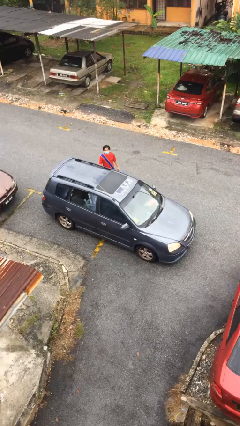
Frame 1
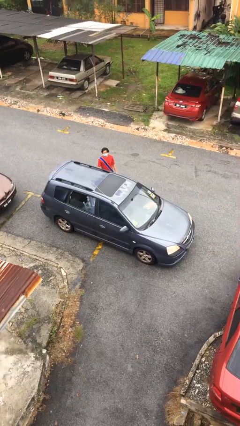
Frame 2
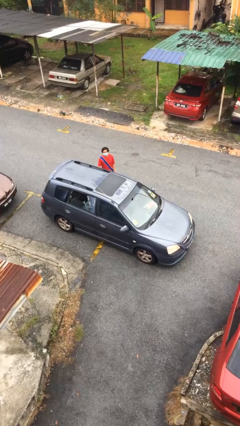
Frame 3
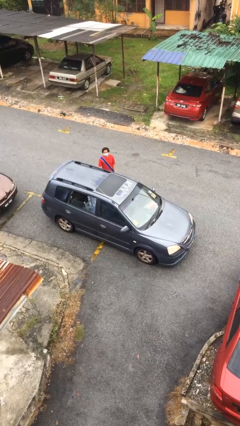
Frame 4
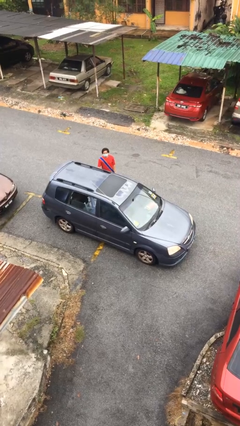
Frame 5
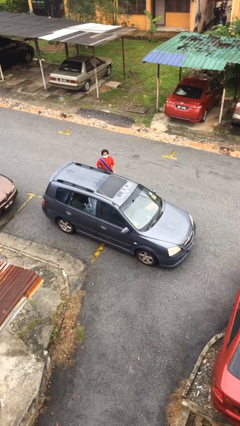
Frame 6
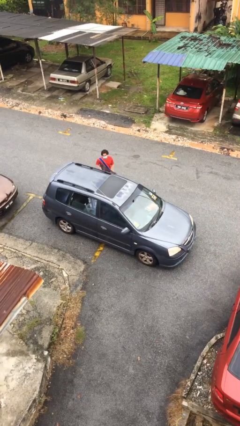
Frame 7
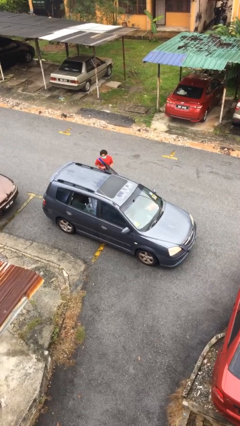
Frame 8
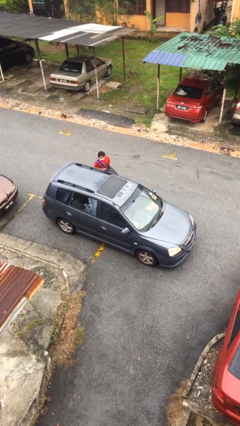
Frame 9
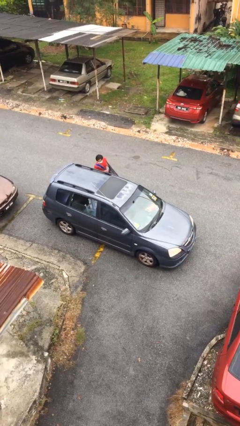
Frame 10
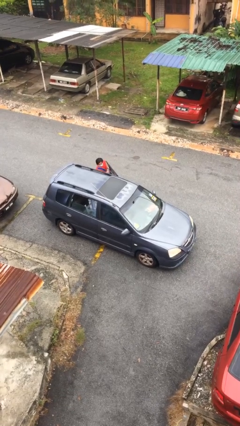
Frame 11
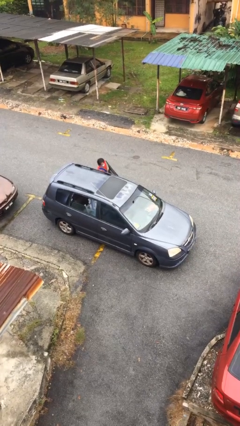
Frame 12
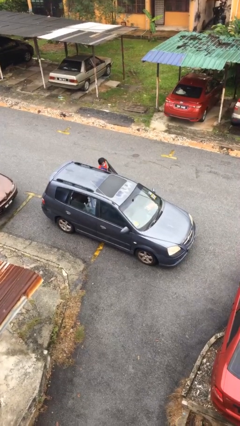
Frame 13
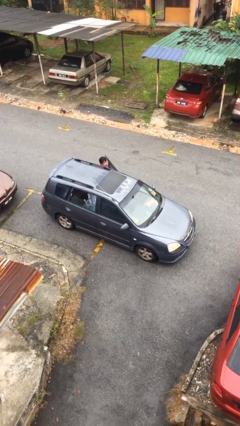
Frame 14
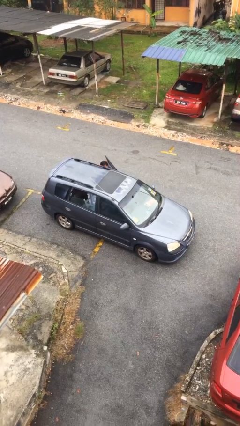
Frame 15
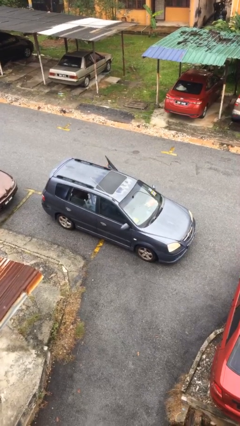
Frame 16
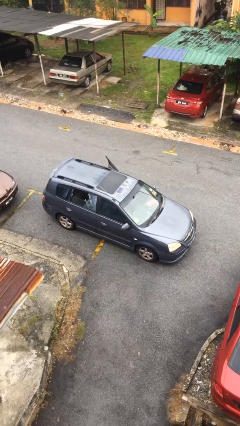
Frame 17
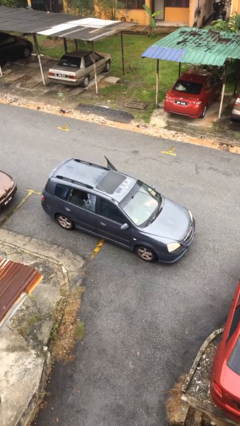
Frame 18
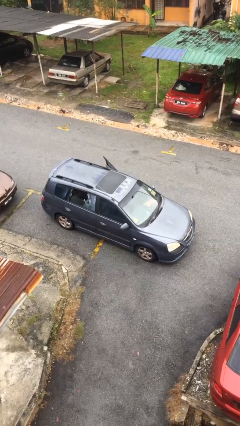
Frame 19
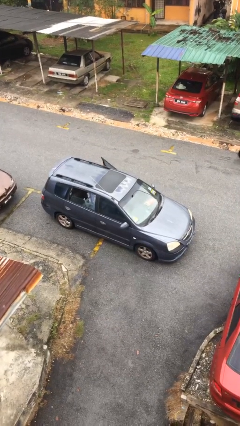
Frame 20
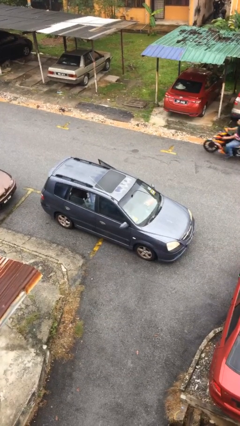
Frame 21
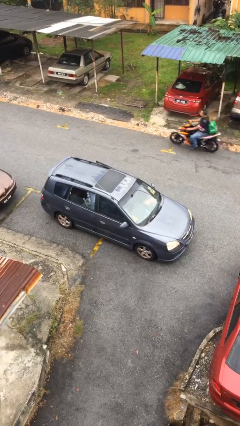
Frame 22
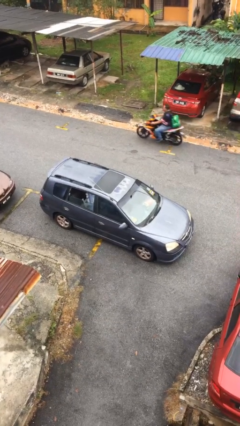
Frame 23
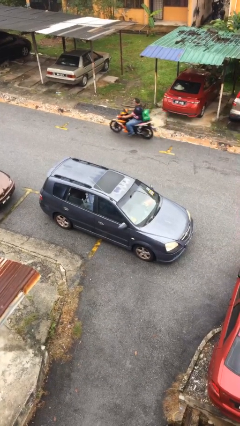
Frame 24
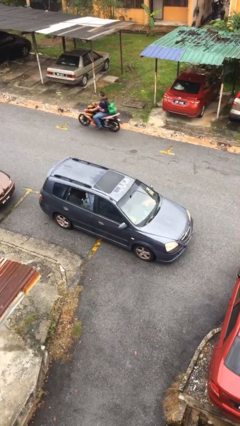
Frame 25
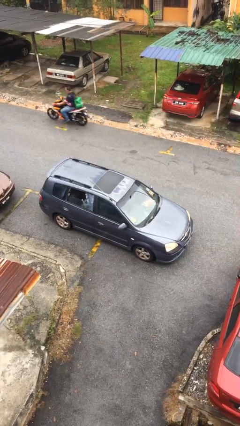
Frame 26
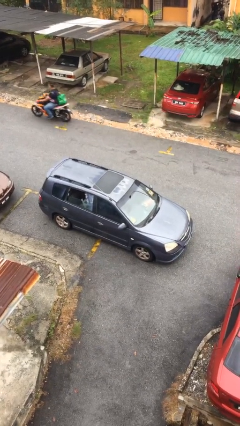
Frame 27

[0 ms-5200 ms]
car picks up person

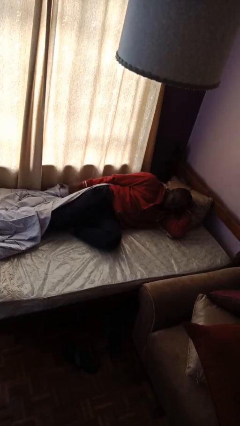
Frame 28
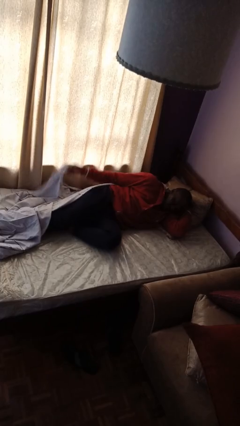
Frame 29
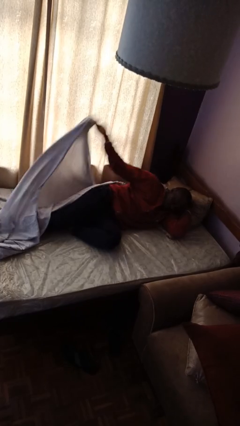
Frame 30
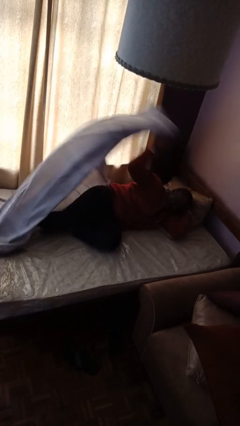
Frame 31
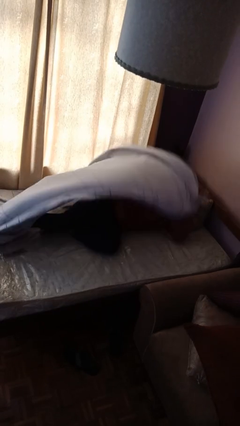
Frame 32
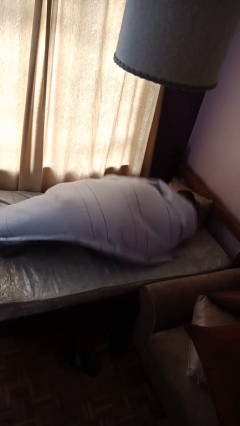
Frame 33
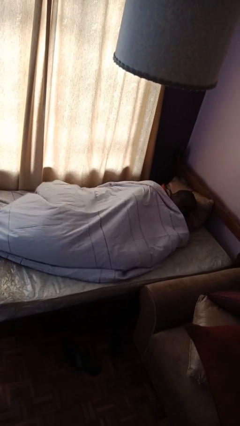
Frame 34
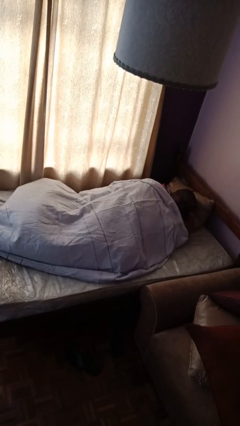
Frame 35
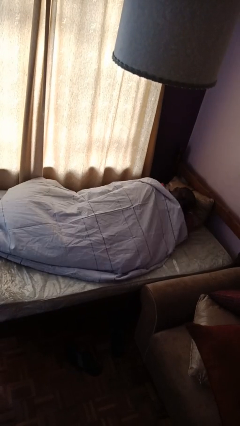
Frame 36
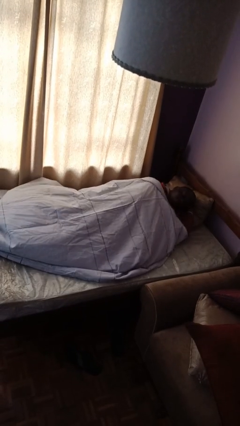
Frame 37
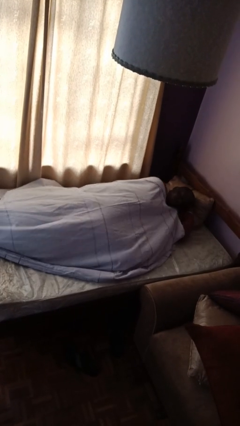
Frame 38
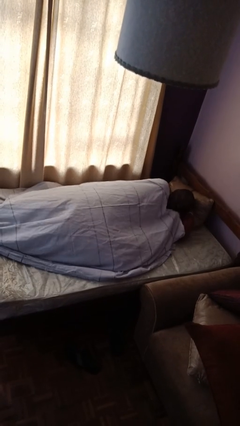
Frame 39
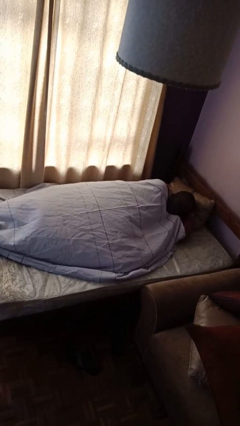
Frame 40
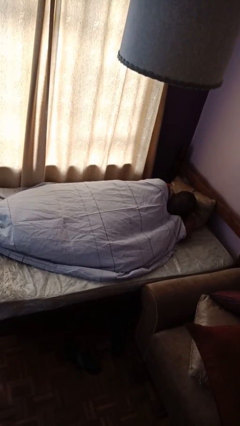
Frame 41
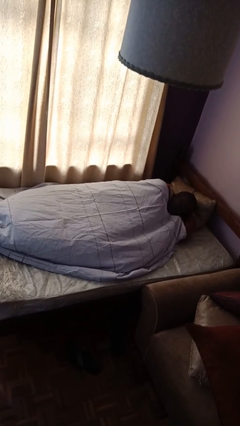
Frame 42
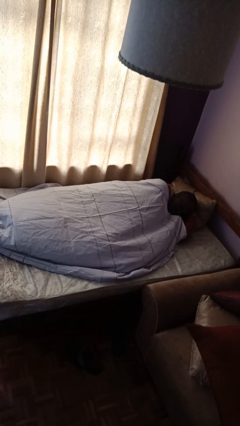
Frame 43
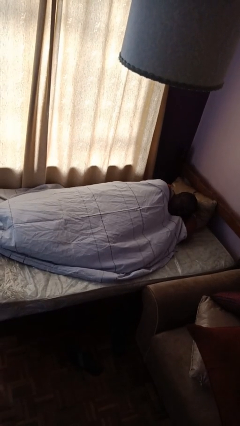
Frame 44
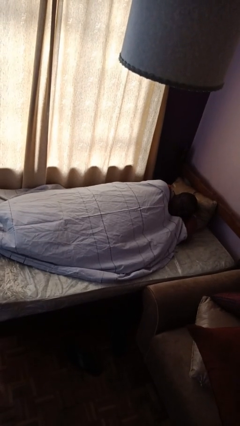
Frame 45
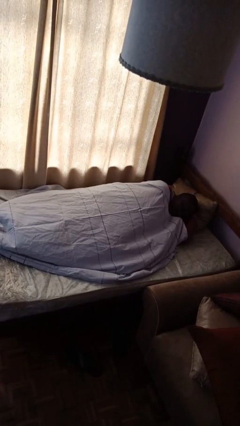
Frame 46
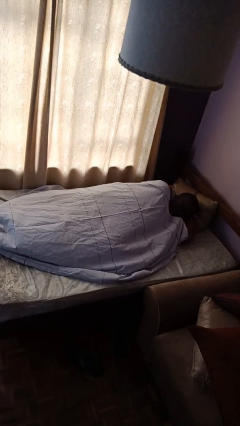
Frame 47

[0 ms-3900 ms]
person covers with bedsheets

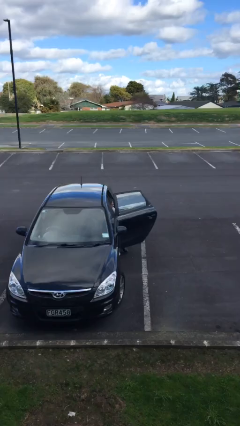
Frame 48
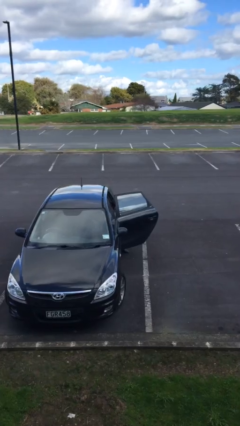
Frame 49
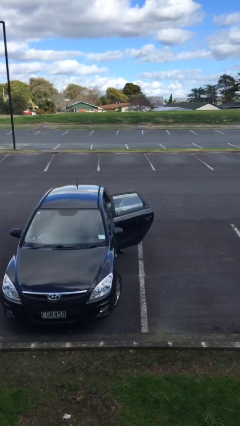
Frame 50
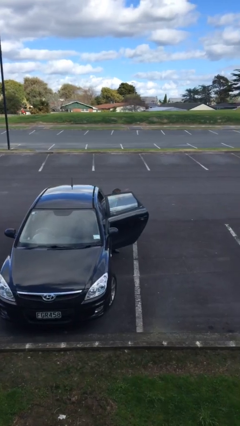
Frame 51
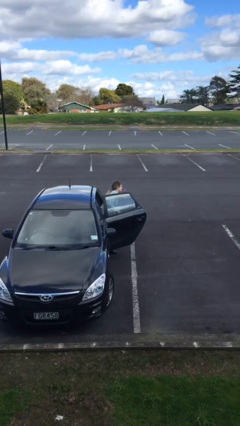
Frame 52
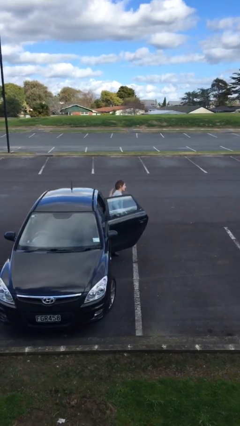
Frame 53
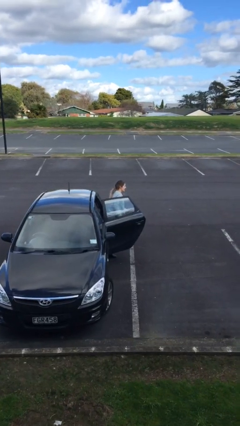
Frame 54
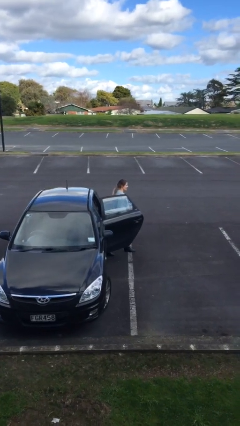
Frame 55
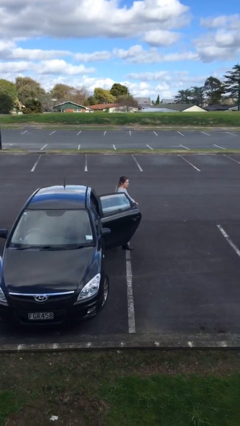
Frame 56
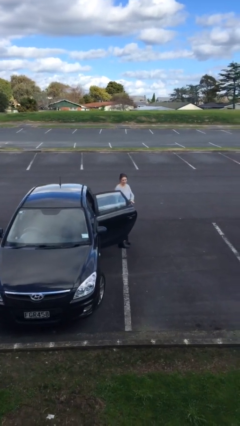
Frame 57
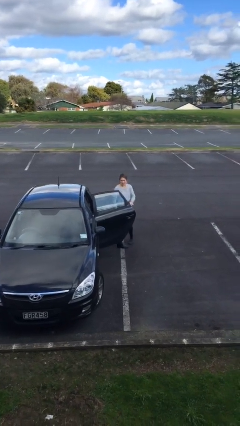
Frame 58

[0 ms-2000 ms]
person exits car

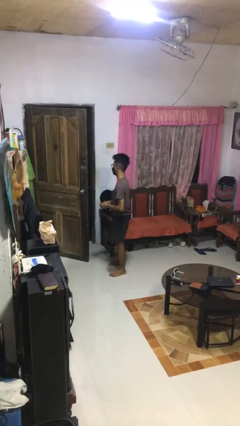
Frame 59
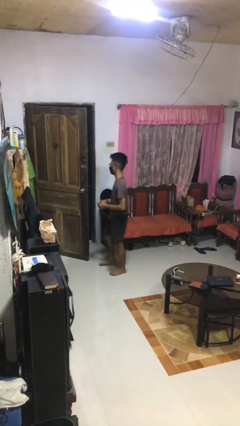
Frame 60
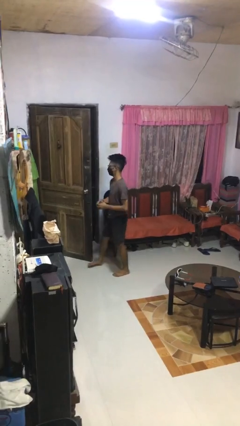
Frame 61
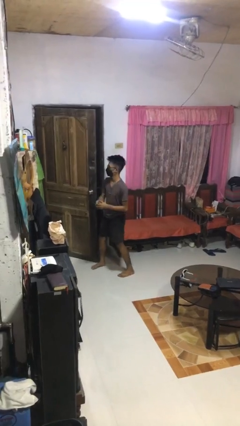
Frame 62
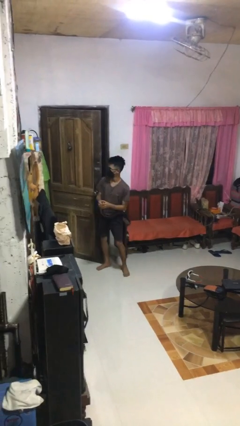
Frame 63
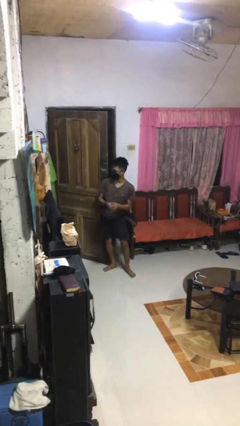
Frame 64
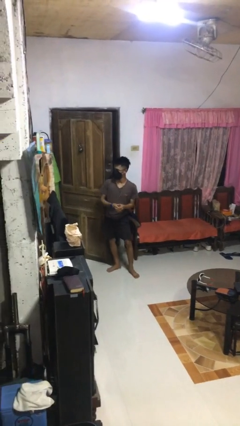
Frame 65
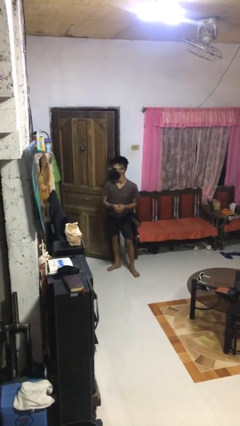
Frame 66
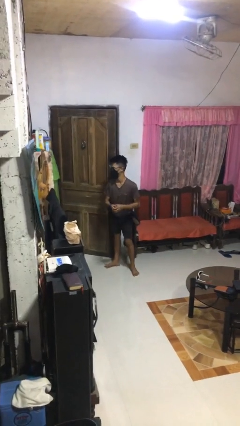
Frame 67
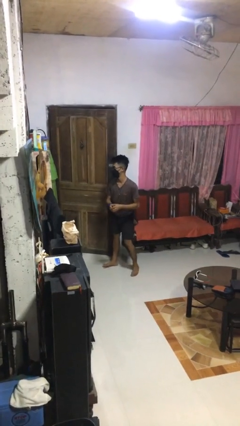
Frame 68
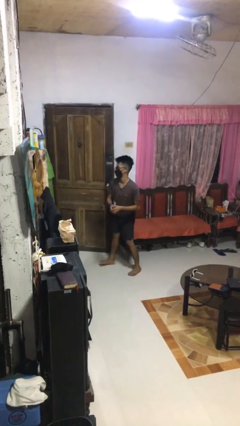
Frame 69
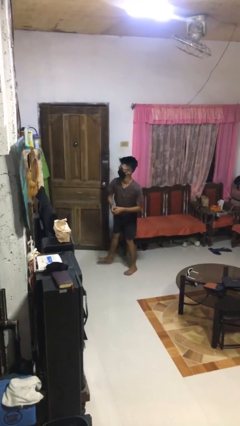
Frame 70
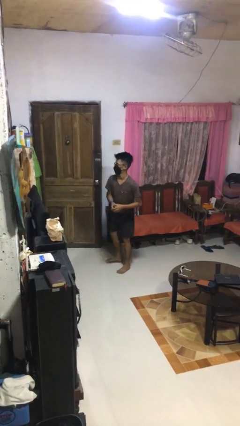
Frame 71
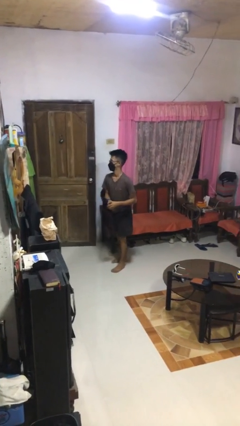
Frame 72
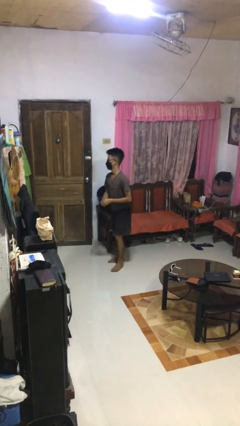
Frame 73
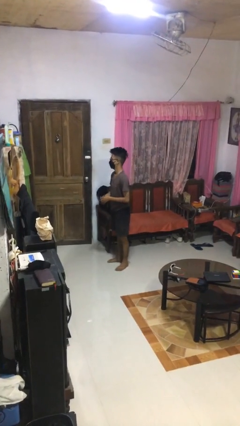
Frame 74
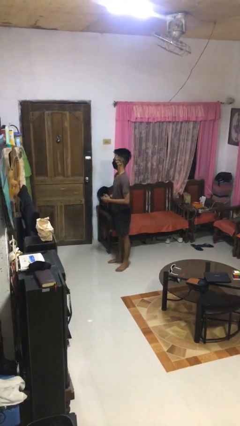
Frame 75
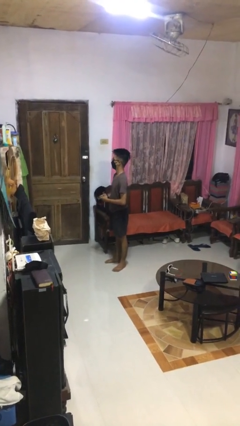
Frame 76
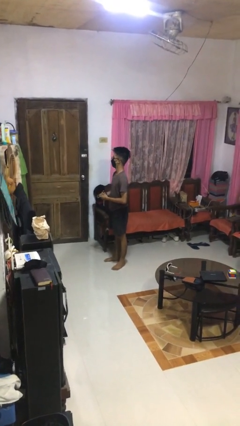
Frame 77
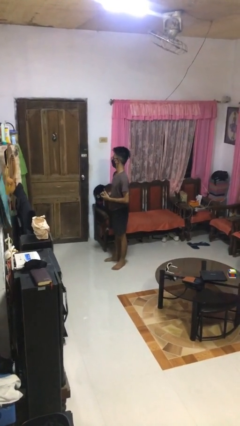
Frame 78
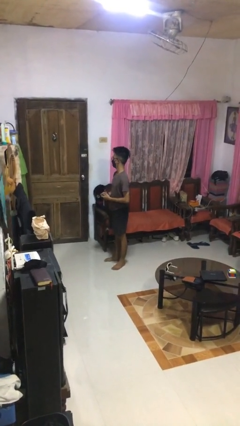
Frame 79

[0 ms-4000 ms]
person closes door with hip

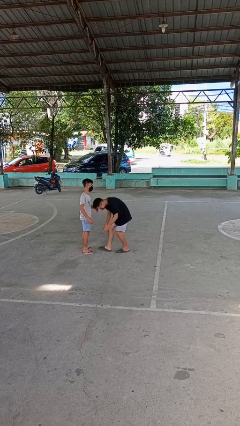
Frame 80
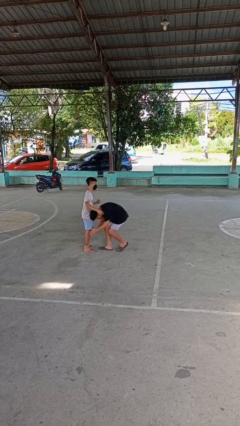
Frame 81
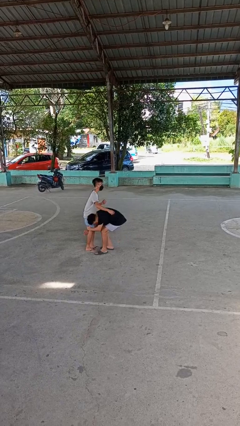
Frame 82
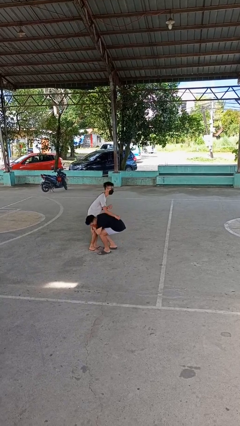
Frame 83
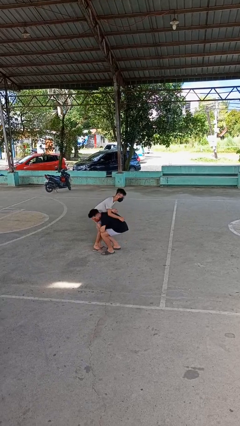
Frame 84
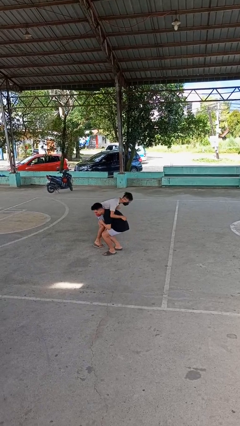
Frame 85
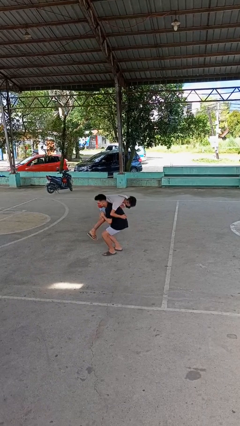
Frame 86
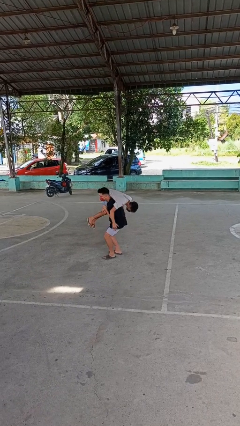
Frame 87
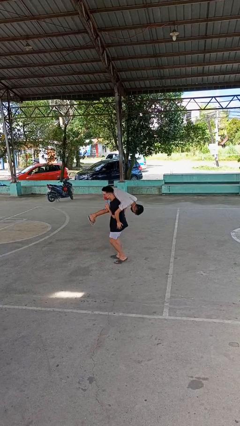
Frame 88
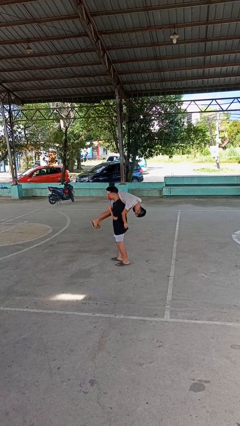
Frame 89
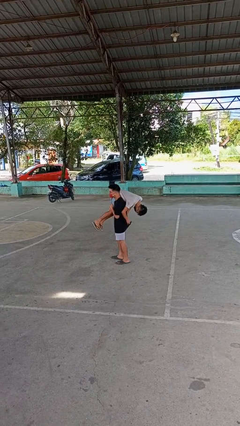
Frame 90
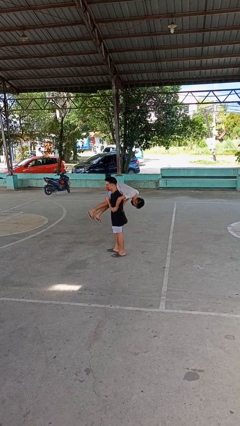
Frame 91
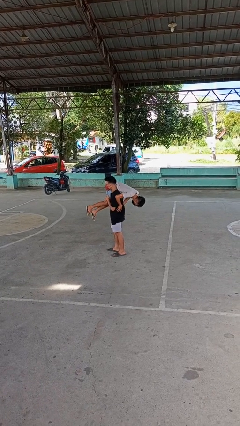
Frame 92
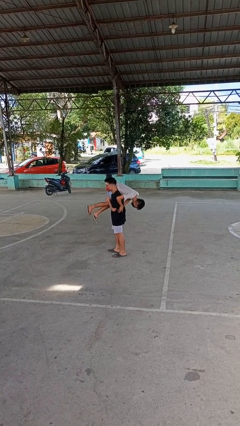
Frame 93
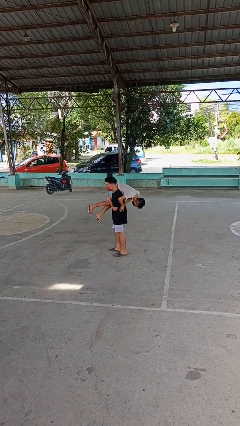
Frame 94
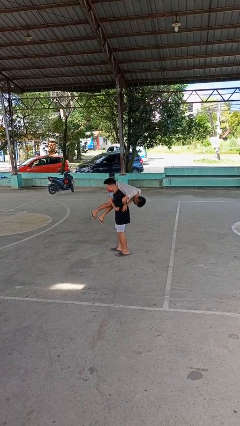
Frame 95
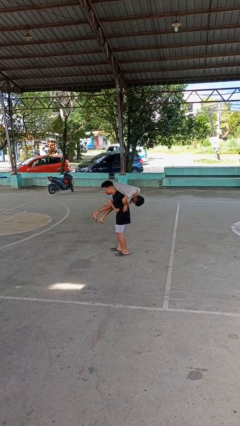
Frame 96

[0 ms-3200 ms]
person carries person over shoulder
